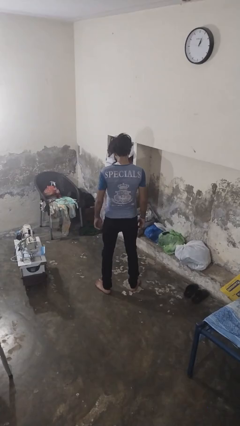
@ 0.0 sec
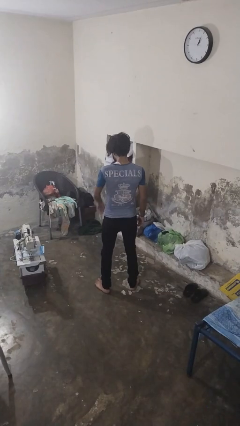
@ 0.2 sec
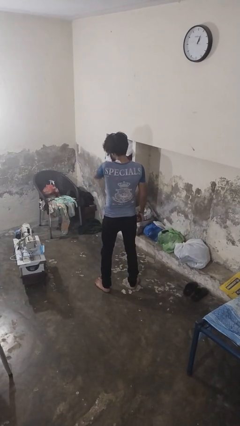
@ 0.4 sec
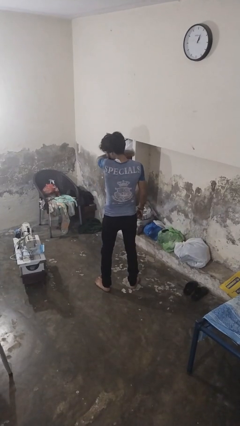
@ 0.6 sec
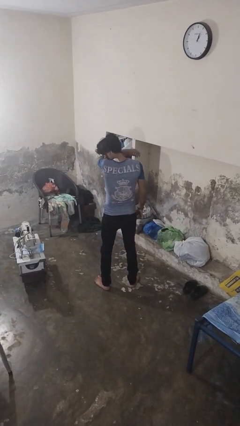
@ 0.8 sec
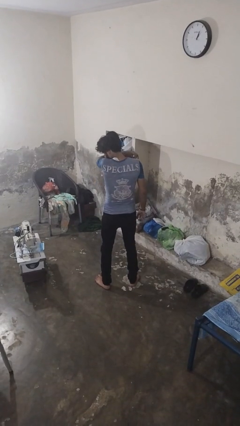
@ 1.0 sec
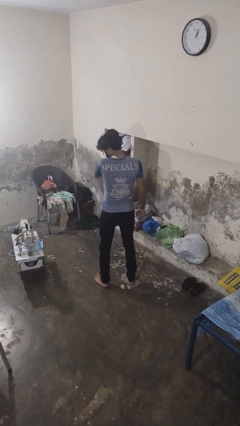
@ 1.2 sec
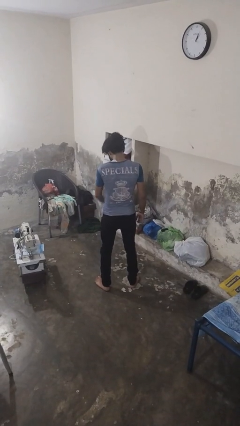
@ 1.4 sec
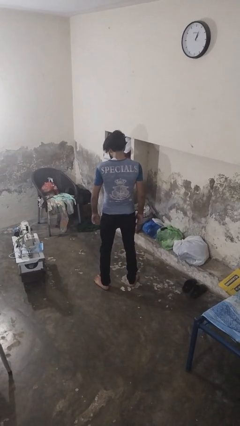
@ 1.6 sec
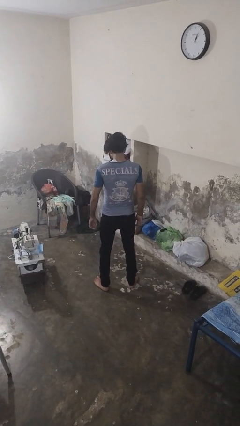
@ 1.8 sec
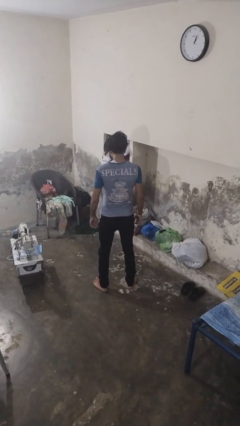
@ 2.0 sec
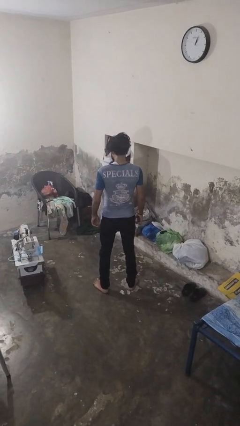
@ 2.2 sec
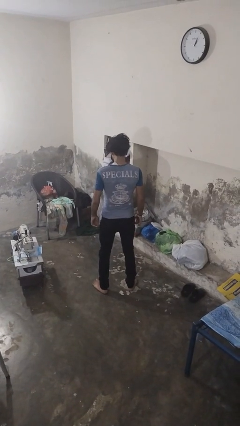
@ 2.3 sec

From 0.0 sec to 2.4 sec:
person sneezes into arm

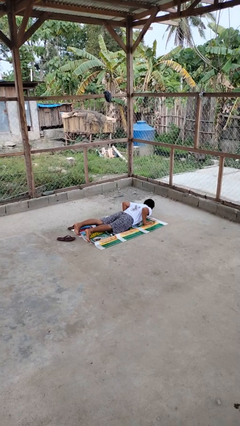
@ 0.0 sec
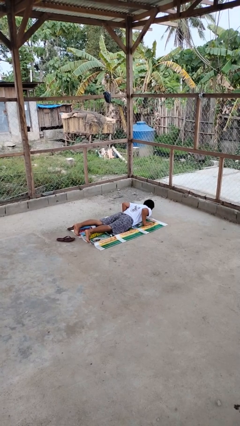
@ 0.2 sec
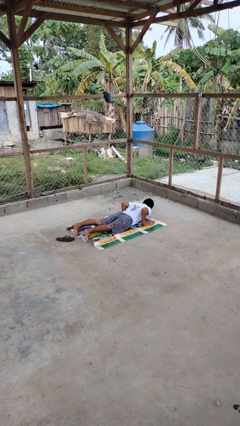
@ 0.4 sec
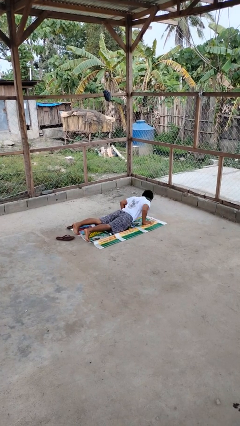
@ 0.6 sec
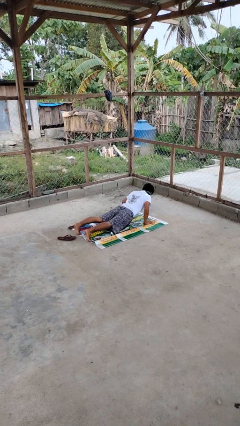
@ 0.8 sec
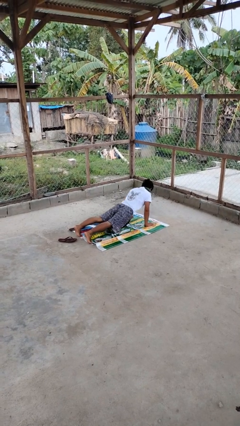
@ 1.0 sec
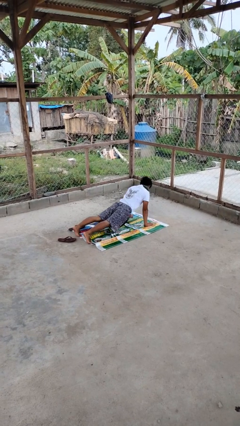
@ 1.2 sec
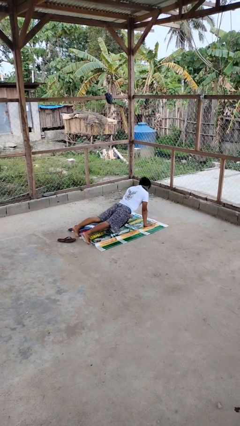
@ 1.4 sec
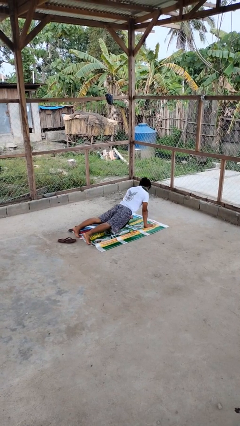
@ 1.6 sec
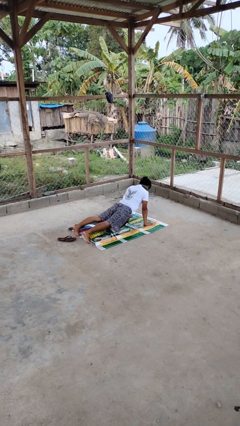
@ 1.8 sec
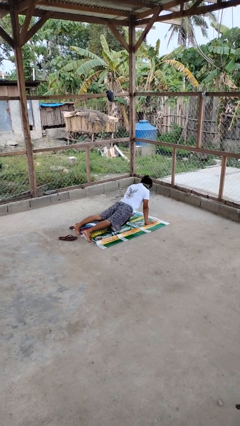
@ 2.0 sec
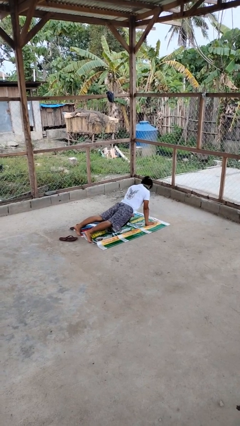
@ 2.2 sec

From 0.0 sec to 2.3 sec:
person exercises with pushup

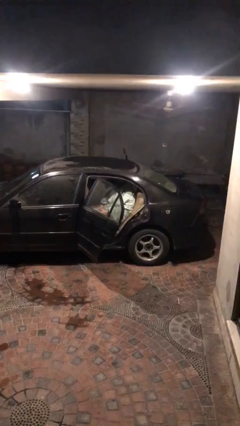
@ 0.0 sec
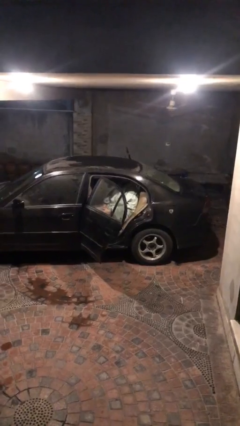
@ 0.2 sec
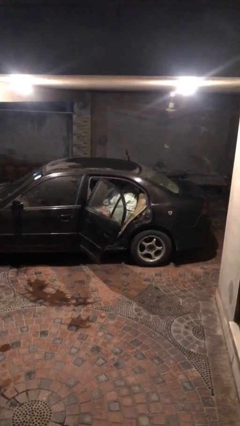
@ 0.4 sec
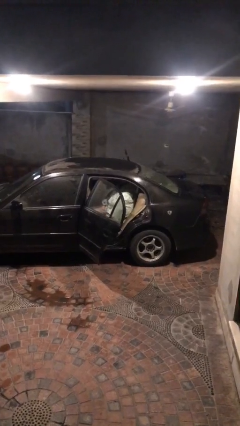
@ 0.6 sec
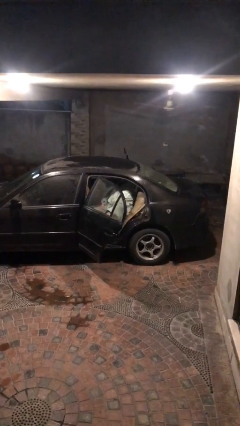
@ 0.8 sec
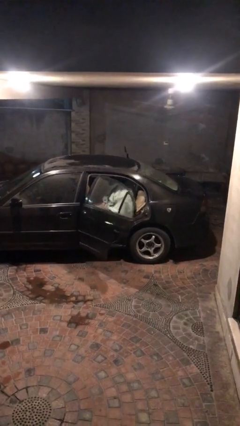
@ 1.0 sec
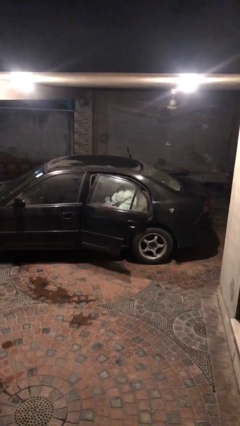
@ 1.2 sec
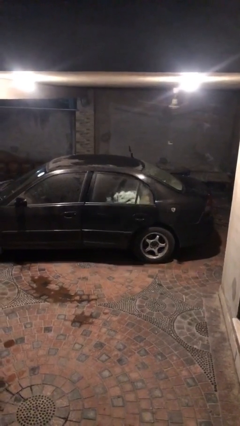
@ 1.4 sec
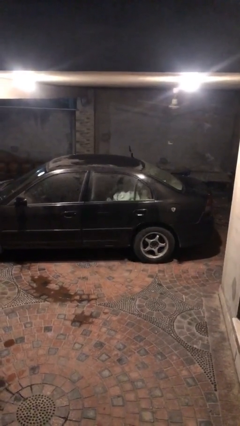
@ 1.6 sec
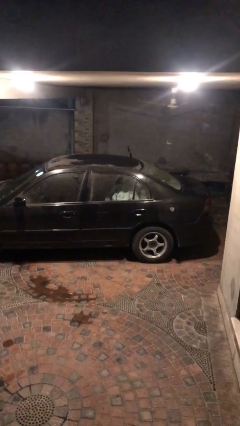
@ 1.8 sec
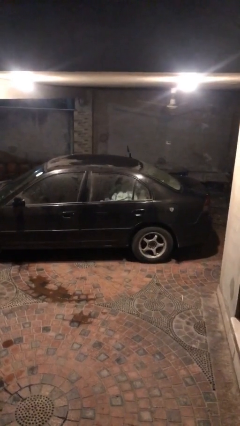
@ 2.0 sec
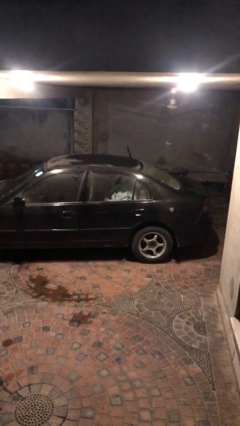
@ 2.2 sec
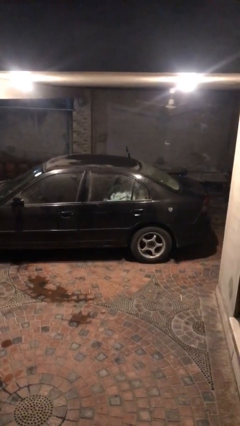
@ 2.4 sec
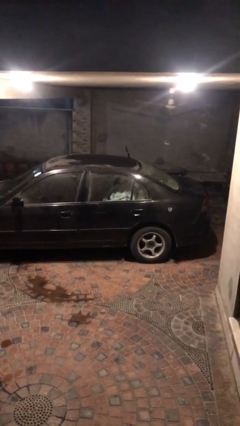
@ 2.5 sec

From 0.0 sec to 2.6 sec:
person closes car door

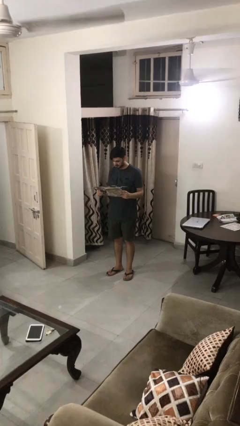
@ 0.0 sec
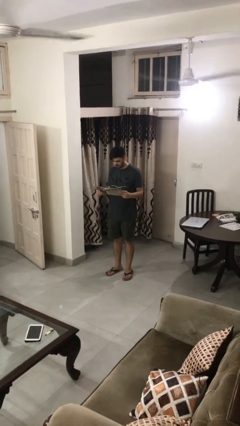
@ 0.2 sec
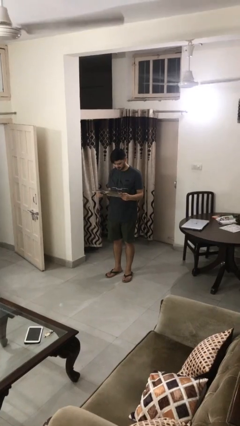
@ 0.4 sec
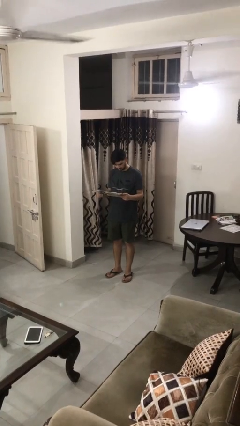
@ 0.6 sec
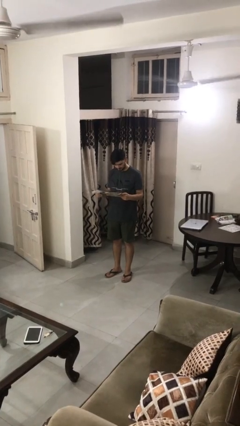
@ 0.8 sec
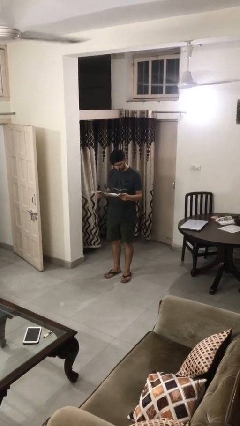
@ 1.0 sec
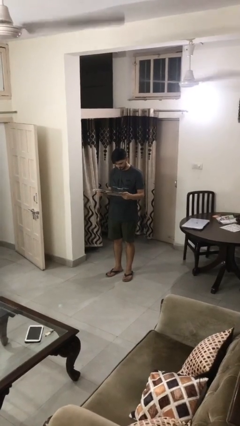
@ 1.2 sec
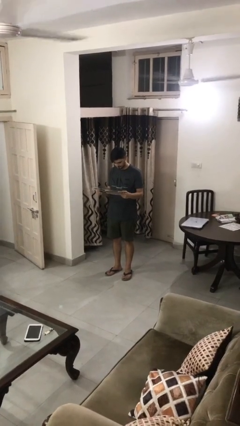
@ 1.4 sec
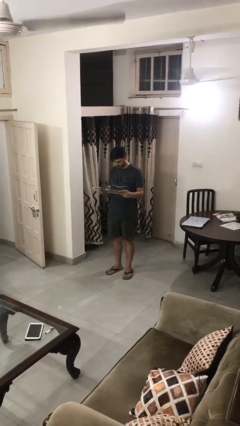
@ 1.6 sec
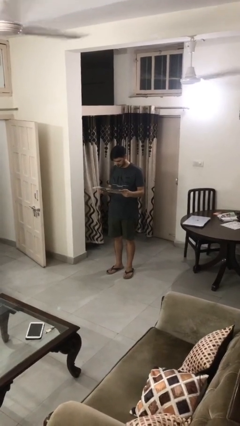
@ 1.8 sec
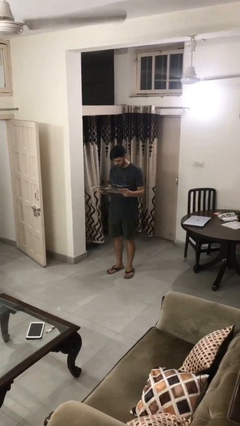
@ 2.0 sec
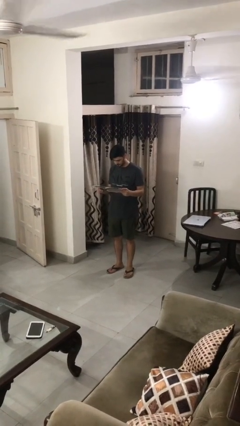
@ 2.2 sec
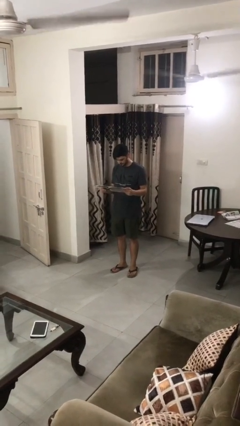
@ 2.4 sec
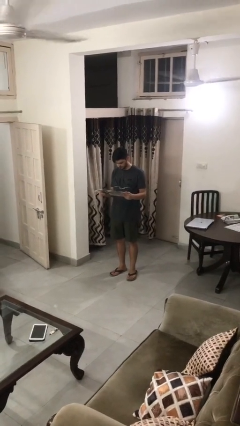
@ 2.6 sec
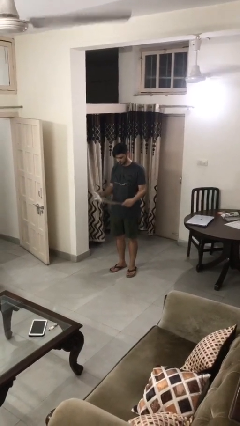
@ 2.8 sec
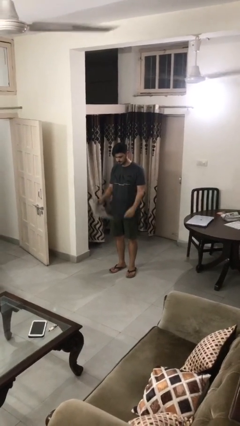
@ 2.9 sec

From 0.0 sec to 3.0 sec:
person reads newspaper

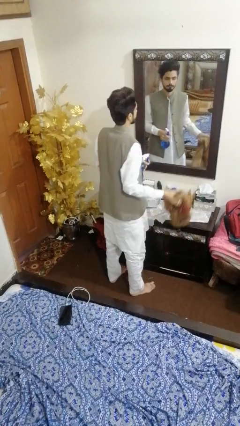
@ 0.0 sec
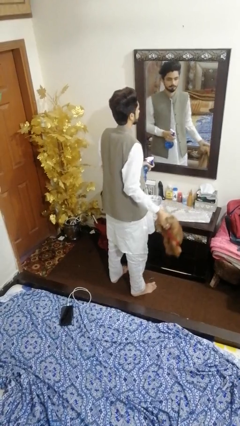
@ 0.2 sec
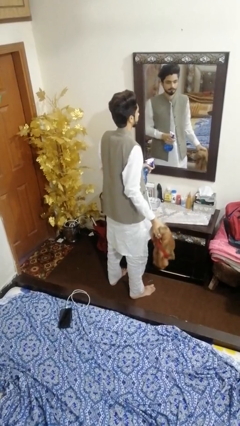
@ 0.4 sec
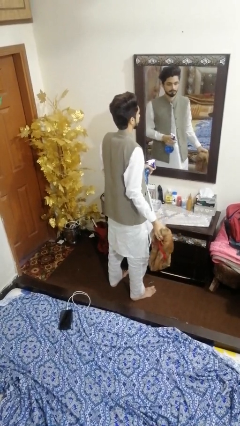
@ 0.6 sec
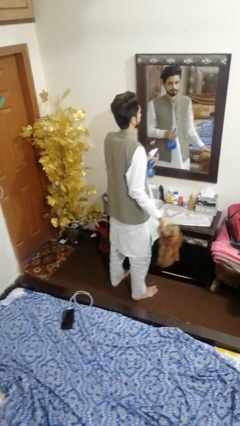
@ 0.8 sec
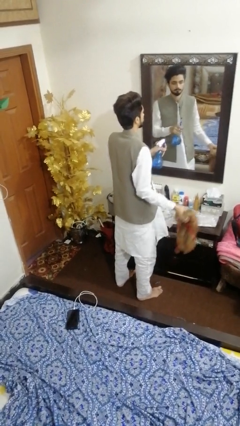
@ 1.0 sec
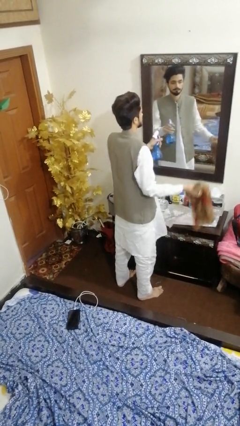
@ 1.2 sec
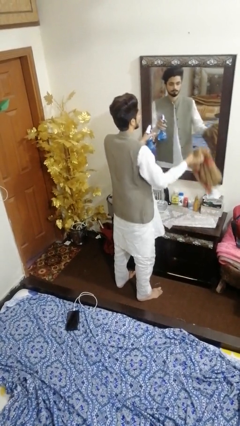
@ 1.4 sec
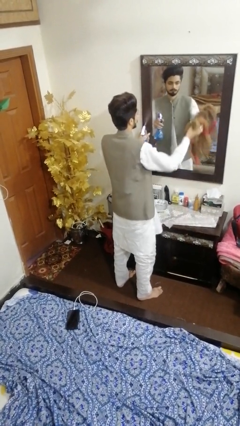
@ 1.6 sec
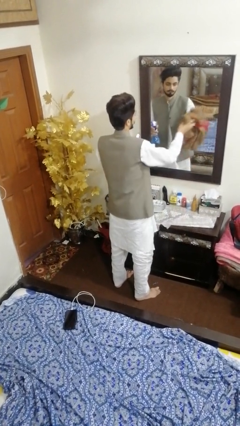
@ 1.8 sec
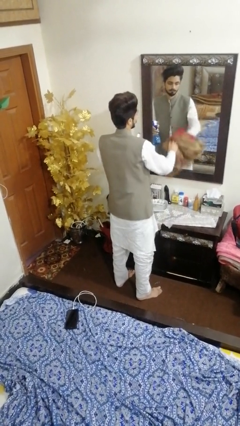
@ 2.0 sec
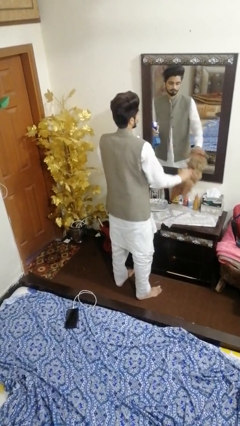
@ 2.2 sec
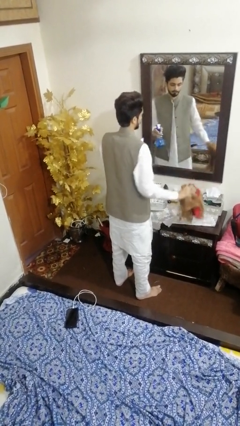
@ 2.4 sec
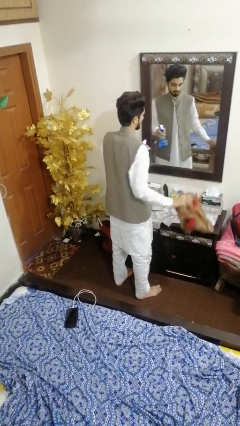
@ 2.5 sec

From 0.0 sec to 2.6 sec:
person sprays from bottle

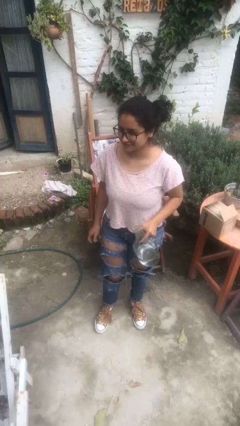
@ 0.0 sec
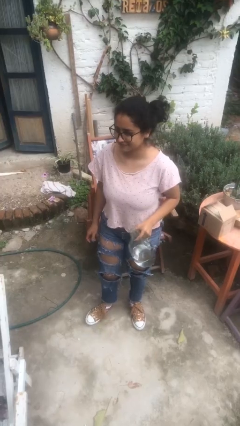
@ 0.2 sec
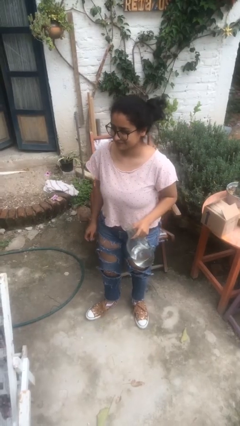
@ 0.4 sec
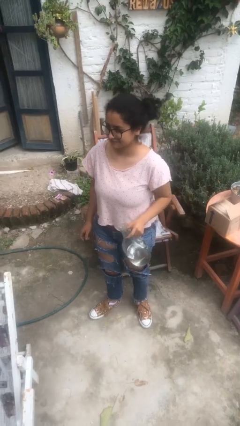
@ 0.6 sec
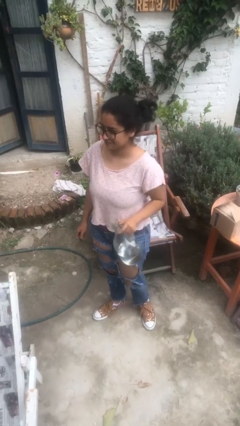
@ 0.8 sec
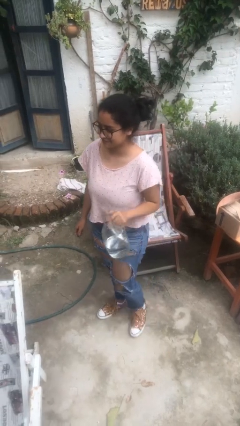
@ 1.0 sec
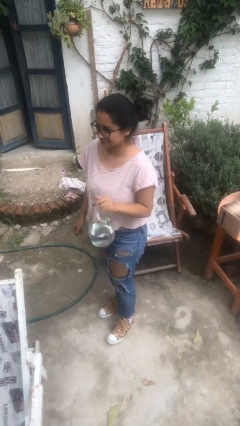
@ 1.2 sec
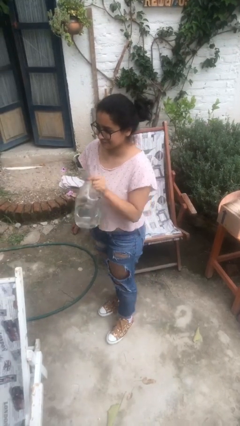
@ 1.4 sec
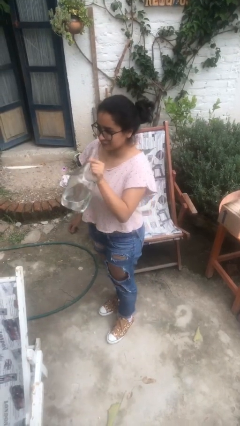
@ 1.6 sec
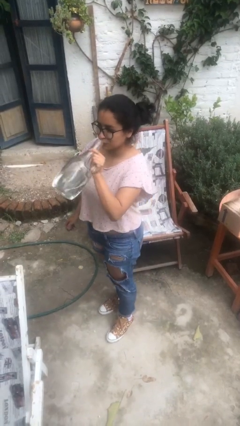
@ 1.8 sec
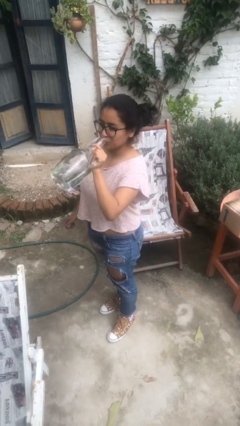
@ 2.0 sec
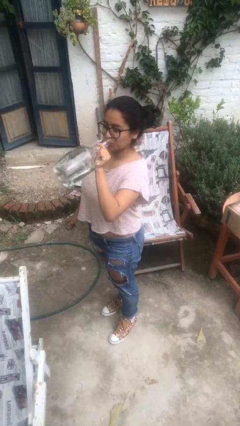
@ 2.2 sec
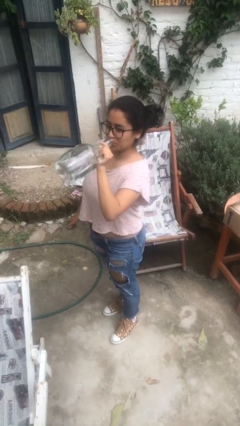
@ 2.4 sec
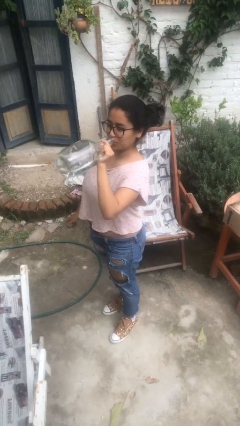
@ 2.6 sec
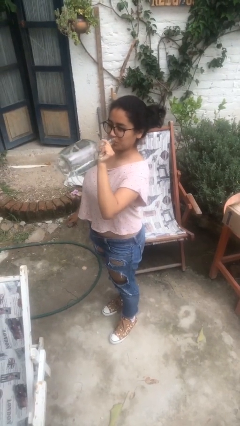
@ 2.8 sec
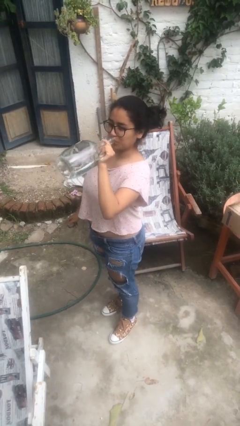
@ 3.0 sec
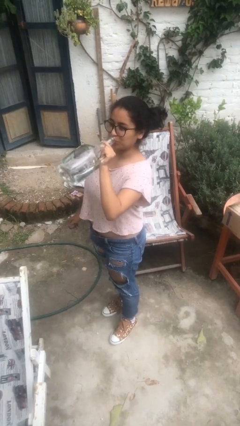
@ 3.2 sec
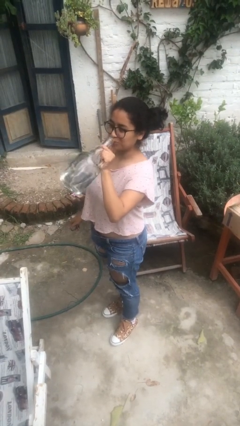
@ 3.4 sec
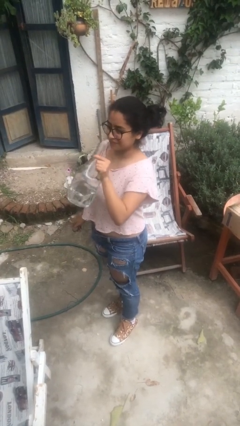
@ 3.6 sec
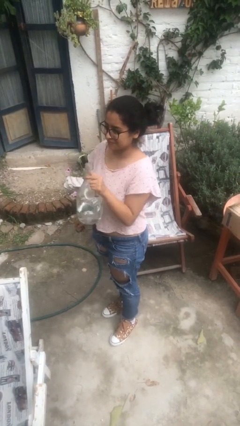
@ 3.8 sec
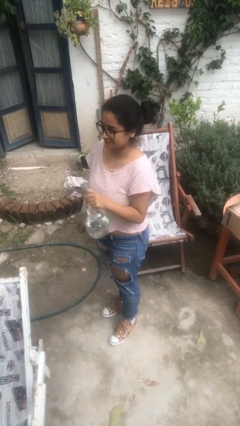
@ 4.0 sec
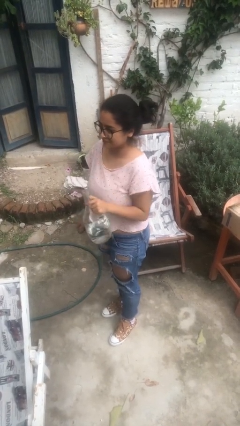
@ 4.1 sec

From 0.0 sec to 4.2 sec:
person drinks from bottle
